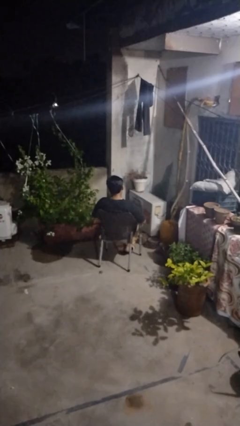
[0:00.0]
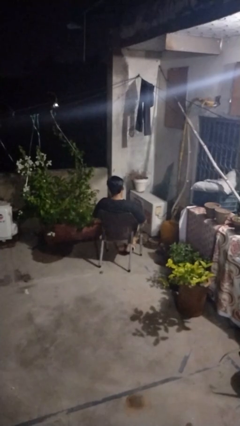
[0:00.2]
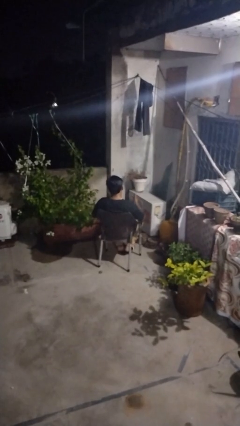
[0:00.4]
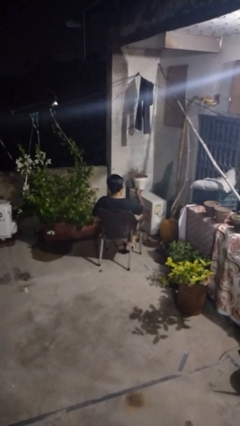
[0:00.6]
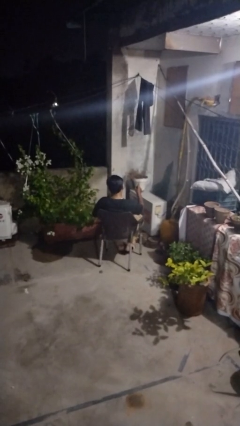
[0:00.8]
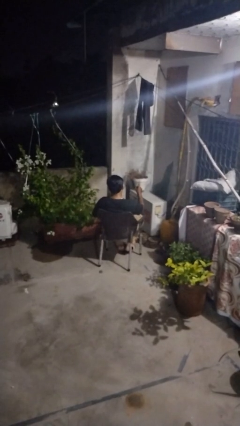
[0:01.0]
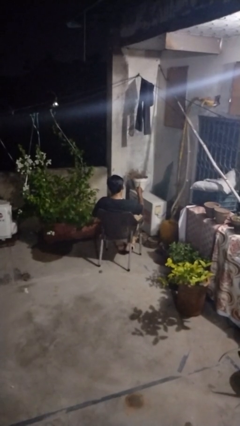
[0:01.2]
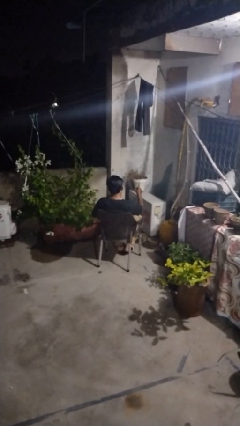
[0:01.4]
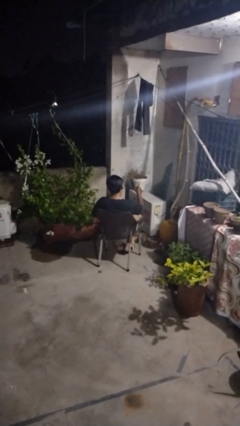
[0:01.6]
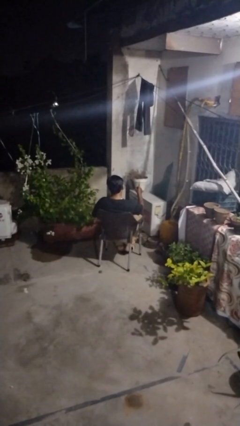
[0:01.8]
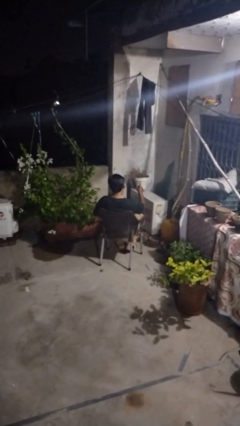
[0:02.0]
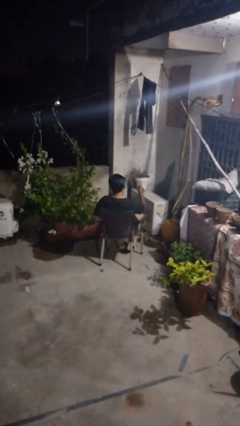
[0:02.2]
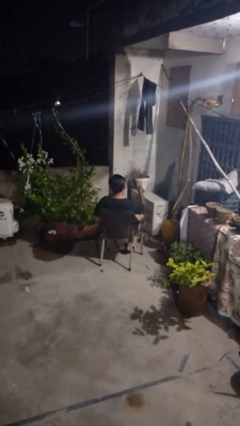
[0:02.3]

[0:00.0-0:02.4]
person gestures number one

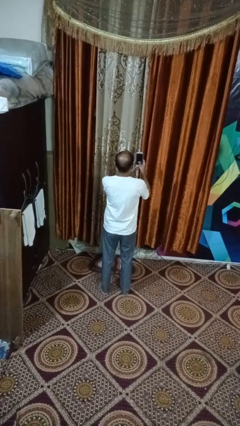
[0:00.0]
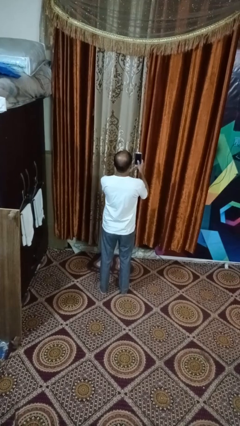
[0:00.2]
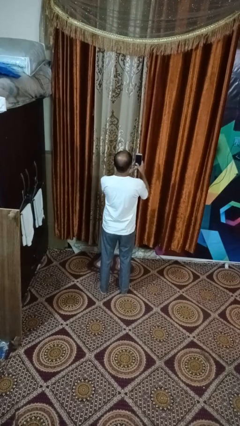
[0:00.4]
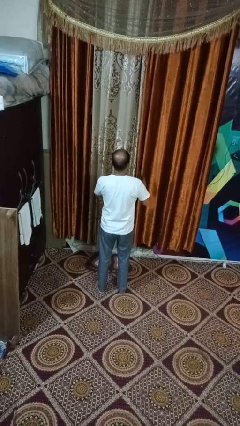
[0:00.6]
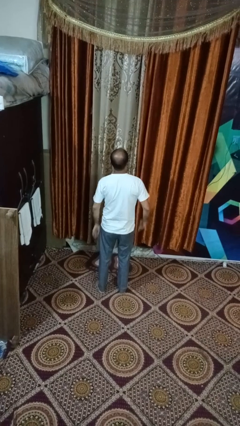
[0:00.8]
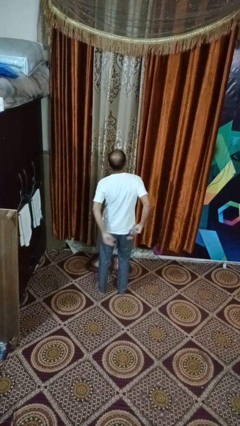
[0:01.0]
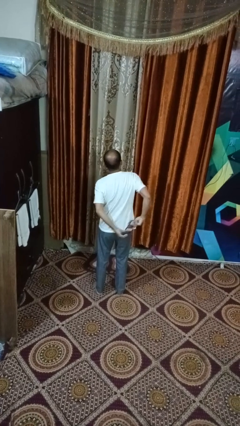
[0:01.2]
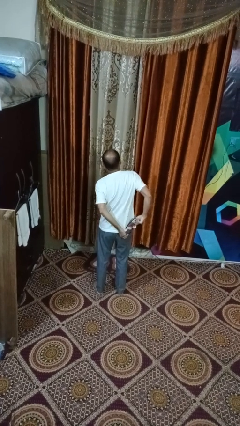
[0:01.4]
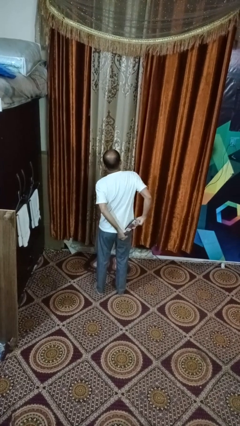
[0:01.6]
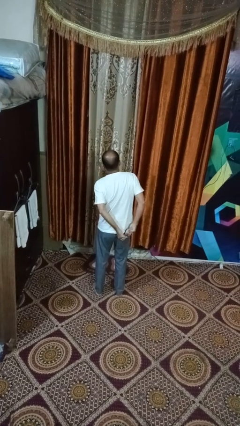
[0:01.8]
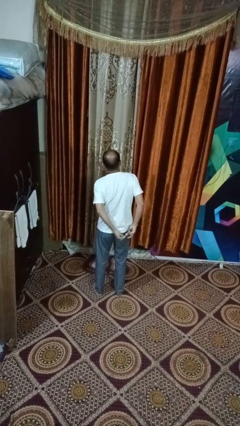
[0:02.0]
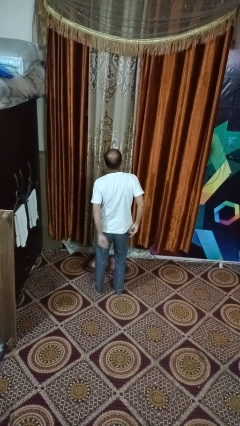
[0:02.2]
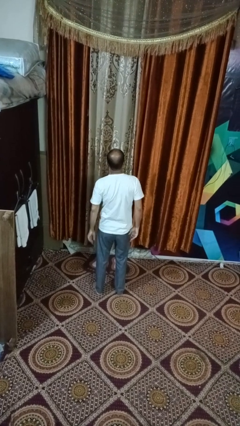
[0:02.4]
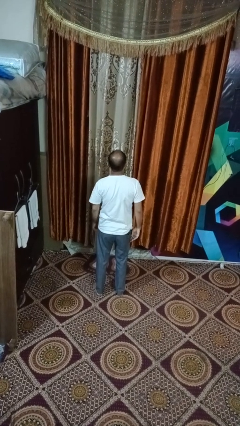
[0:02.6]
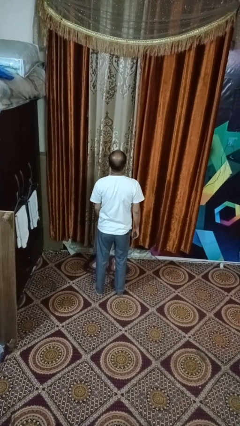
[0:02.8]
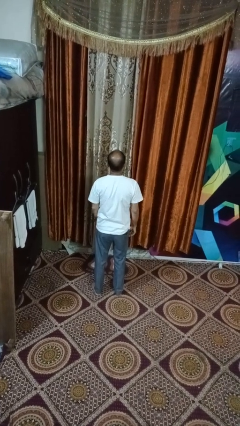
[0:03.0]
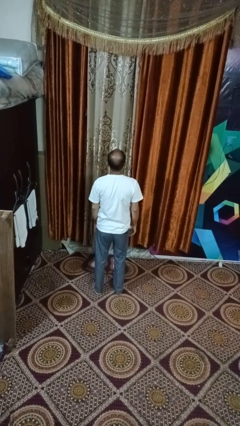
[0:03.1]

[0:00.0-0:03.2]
person puts phone into pocket

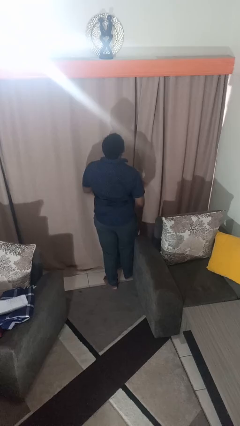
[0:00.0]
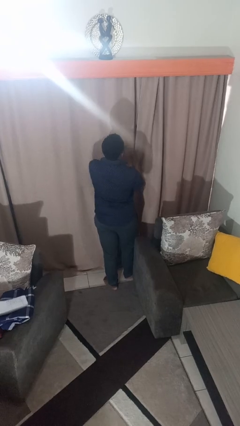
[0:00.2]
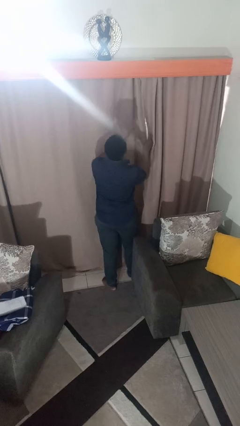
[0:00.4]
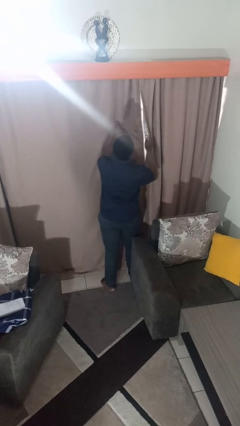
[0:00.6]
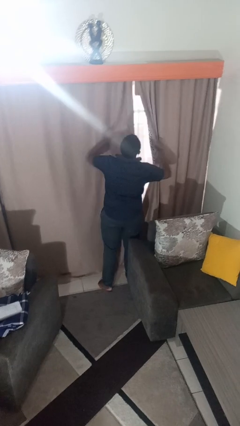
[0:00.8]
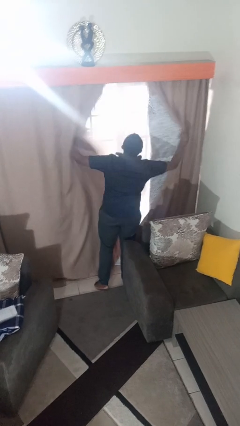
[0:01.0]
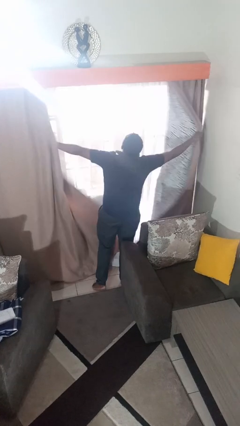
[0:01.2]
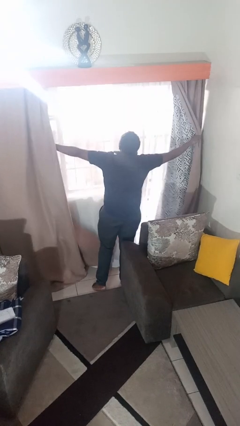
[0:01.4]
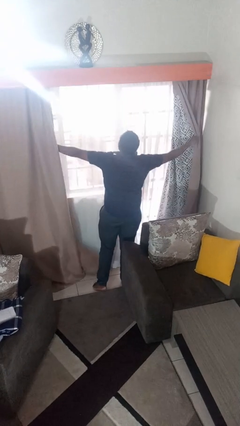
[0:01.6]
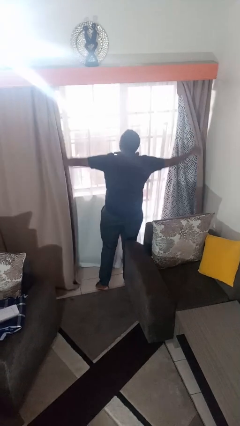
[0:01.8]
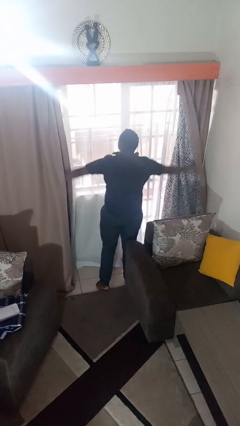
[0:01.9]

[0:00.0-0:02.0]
person opens curtains

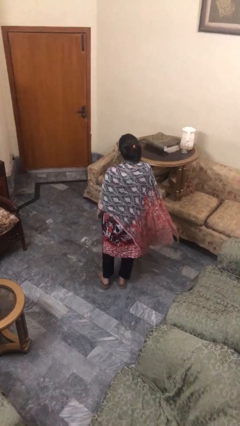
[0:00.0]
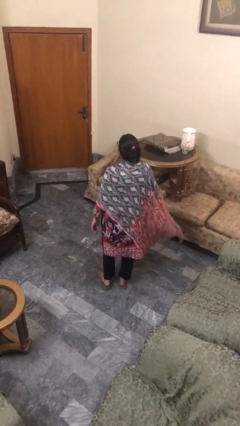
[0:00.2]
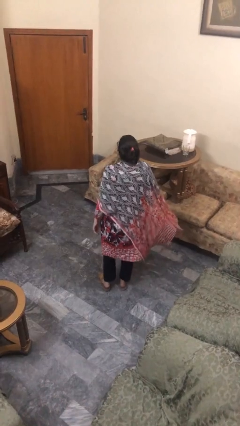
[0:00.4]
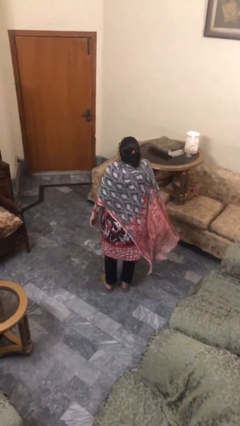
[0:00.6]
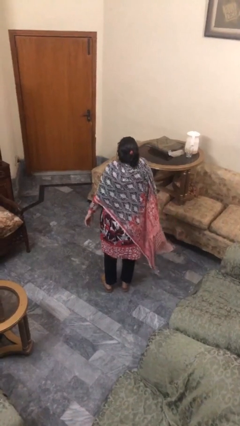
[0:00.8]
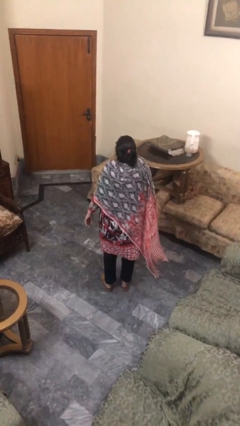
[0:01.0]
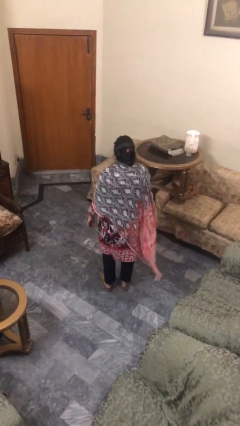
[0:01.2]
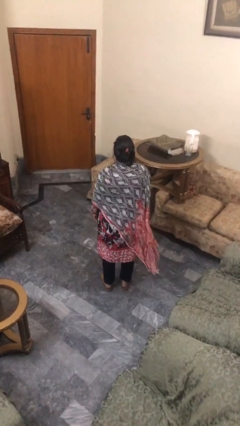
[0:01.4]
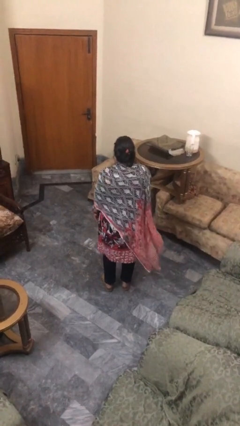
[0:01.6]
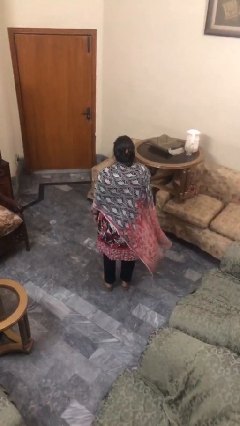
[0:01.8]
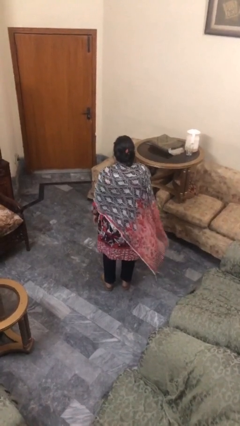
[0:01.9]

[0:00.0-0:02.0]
person shrugs

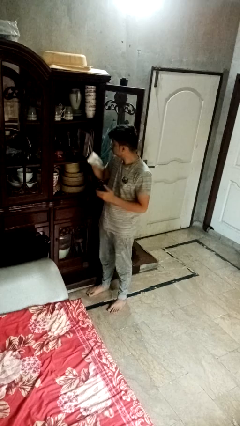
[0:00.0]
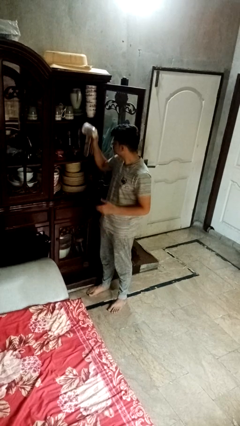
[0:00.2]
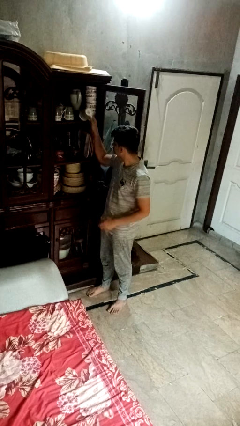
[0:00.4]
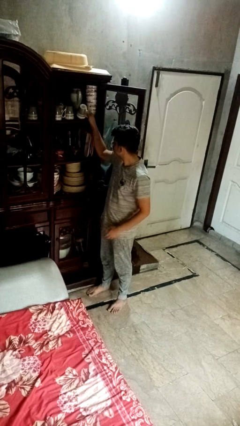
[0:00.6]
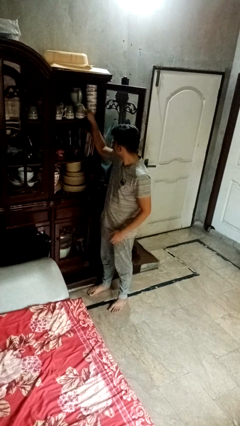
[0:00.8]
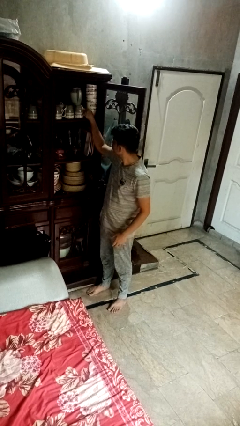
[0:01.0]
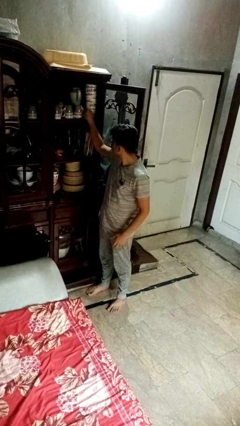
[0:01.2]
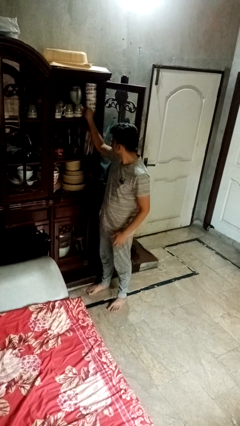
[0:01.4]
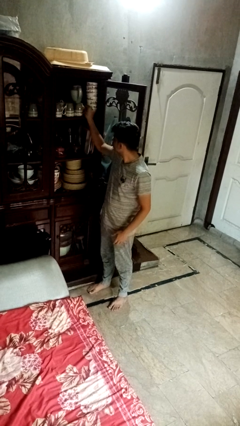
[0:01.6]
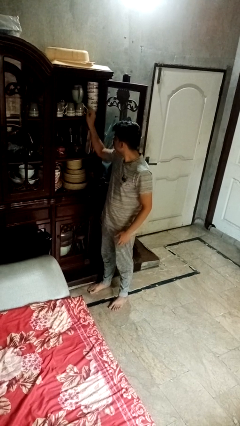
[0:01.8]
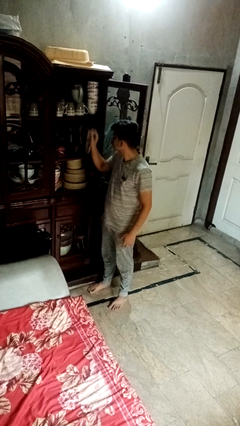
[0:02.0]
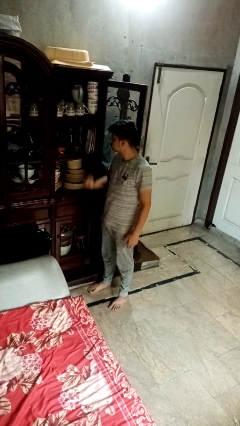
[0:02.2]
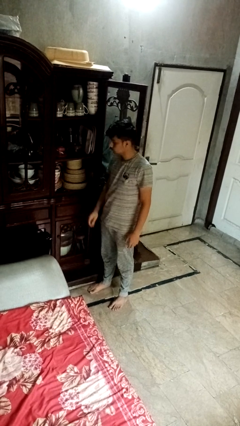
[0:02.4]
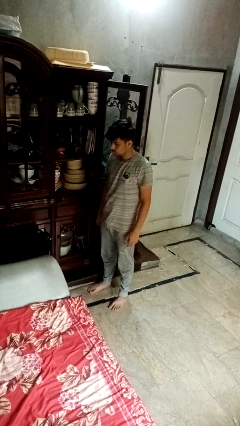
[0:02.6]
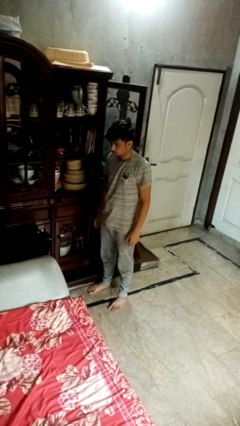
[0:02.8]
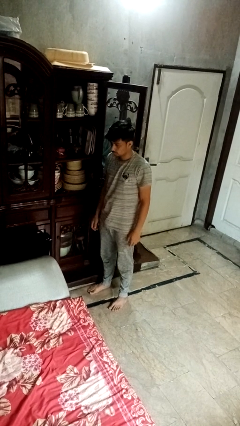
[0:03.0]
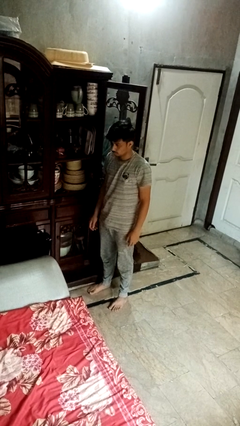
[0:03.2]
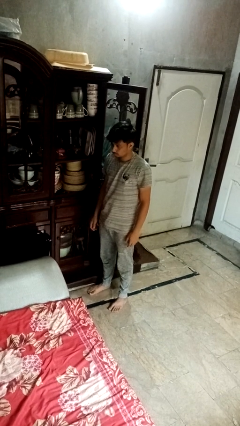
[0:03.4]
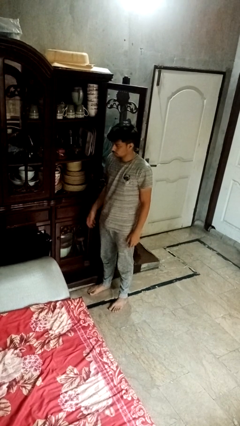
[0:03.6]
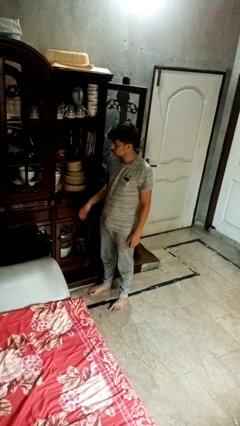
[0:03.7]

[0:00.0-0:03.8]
person puts object in cabinet

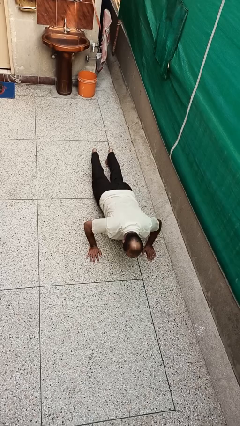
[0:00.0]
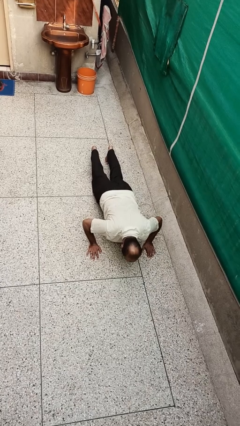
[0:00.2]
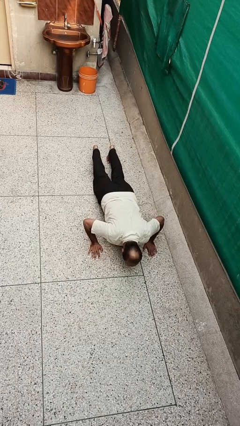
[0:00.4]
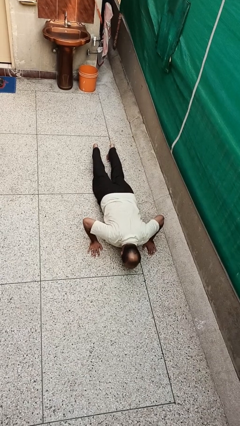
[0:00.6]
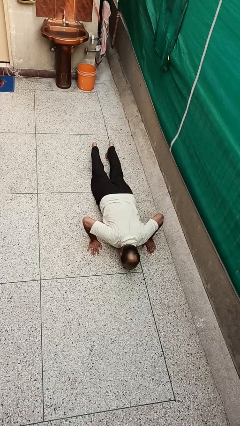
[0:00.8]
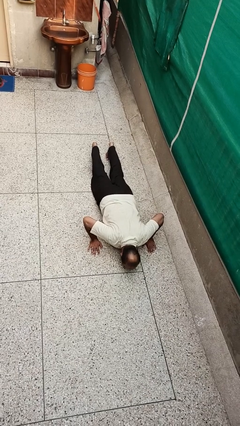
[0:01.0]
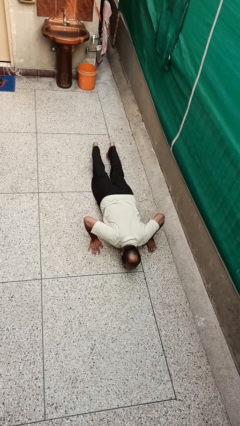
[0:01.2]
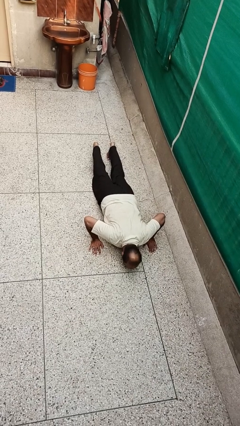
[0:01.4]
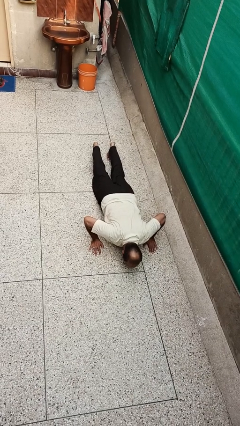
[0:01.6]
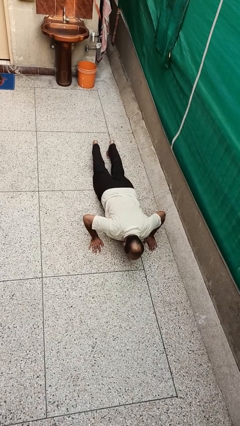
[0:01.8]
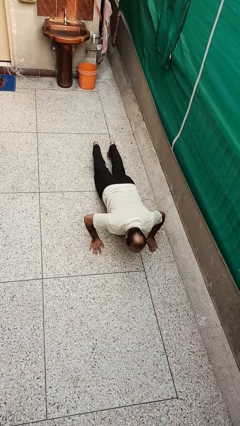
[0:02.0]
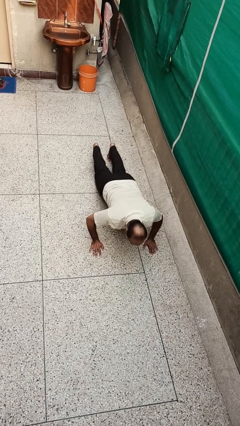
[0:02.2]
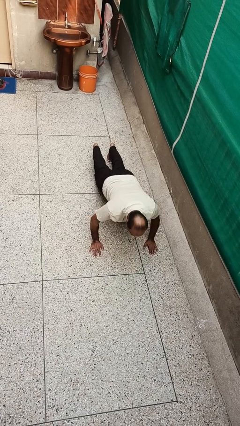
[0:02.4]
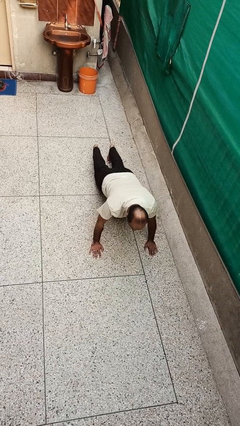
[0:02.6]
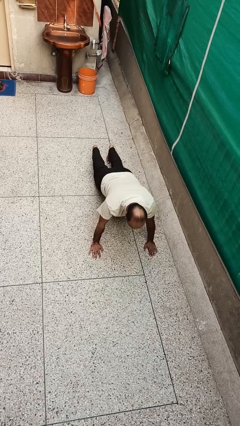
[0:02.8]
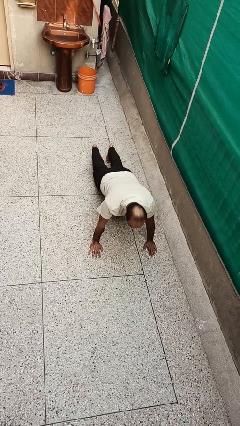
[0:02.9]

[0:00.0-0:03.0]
person exercises with pushup

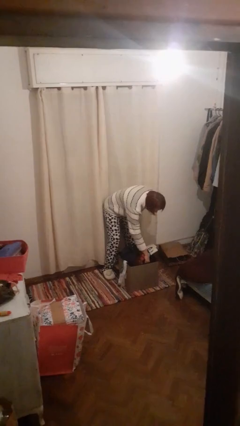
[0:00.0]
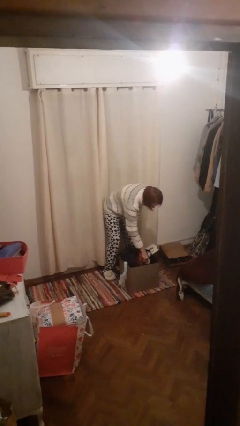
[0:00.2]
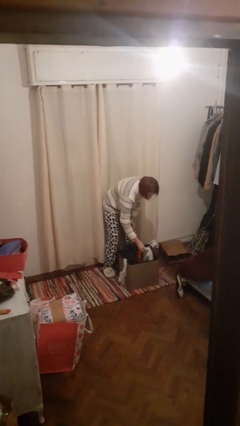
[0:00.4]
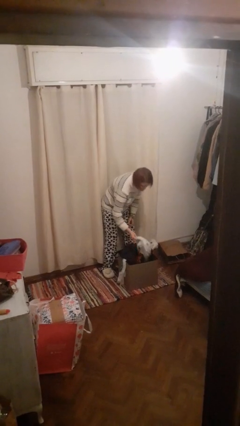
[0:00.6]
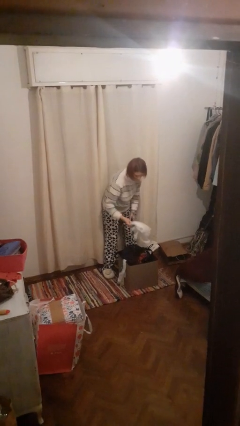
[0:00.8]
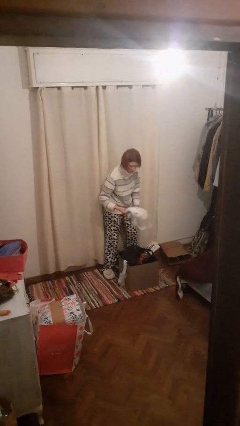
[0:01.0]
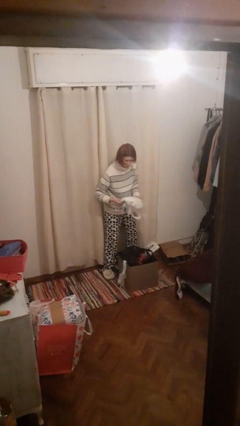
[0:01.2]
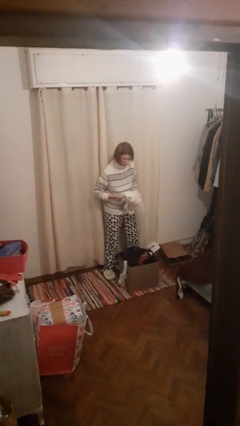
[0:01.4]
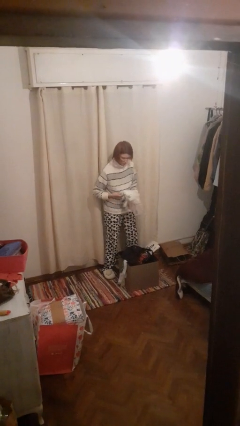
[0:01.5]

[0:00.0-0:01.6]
person takes object from basket
